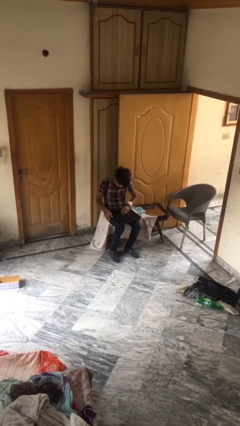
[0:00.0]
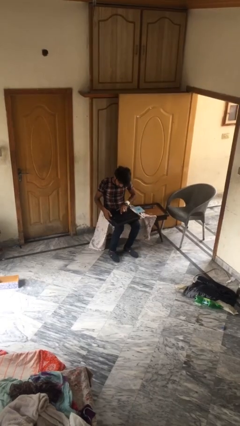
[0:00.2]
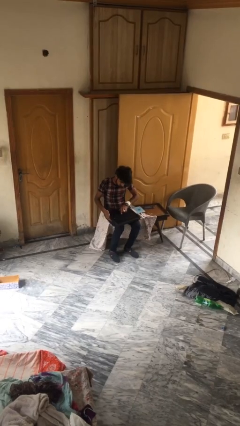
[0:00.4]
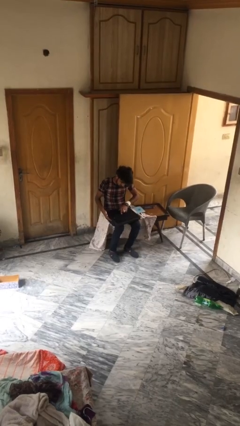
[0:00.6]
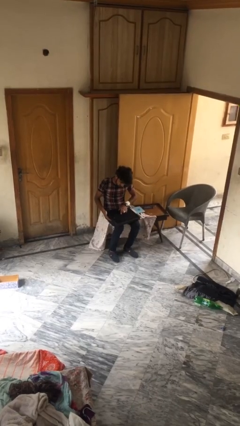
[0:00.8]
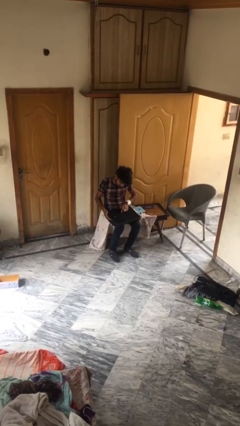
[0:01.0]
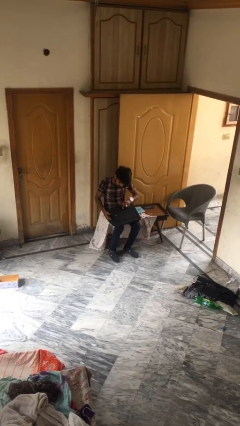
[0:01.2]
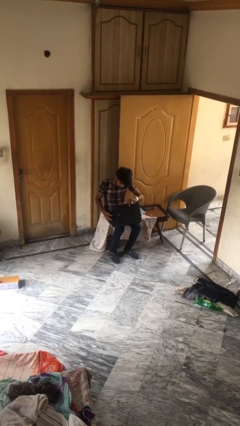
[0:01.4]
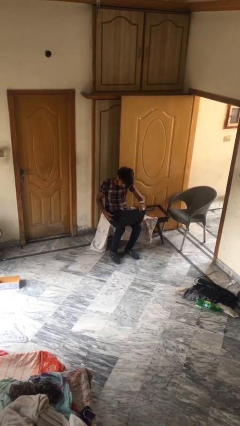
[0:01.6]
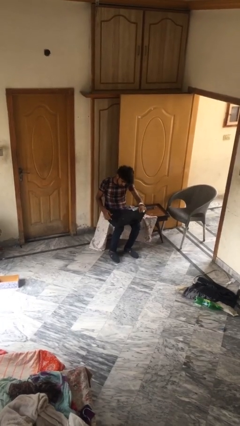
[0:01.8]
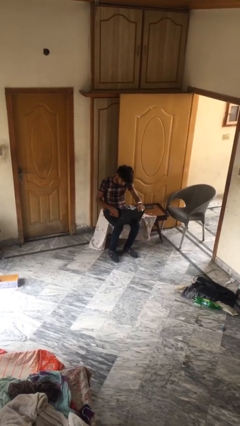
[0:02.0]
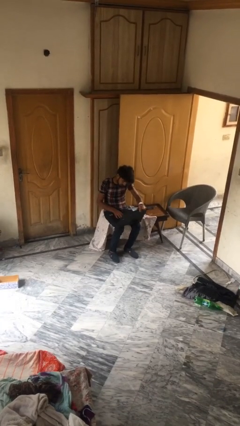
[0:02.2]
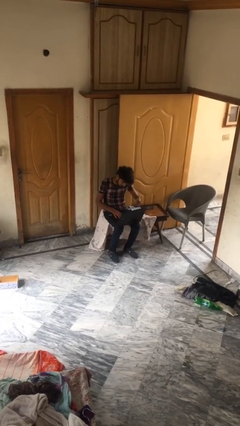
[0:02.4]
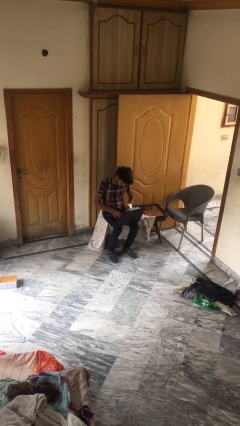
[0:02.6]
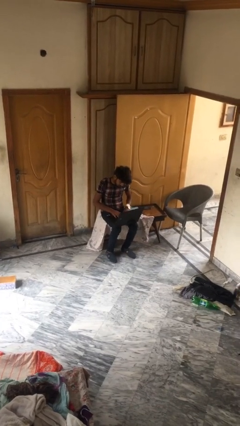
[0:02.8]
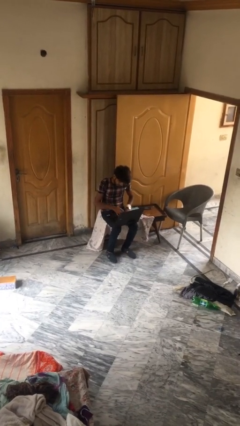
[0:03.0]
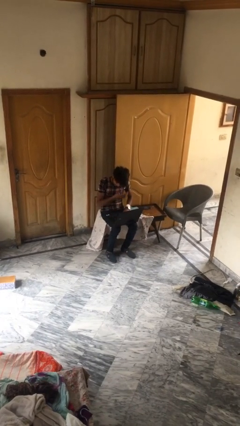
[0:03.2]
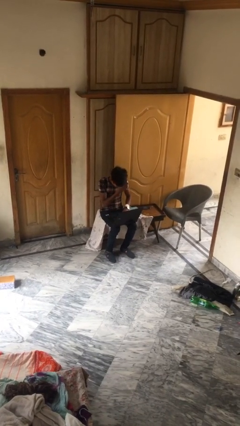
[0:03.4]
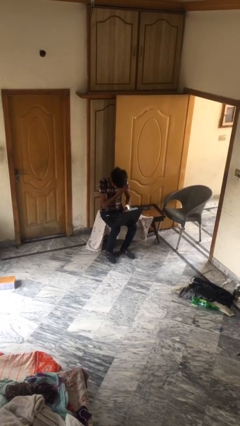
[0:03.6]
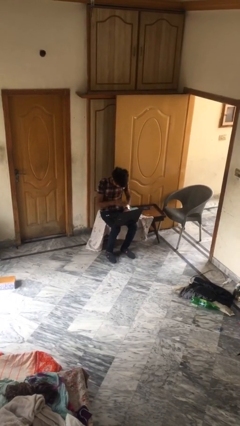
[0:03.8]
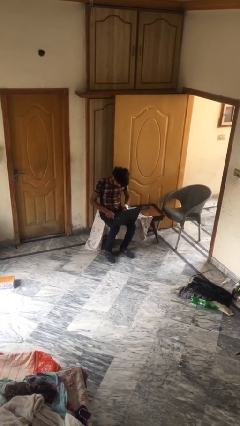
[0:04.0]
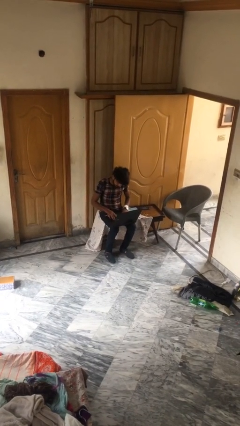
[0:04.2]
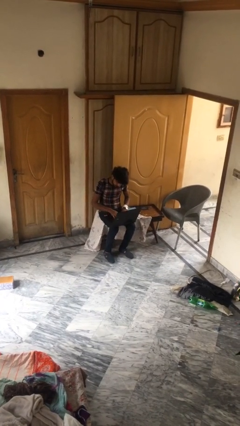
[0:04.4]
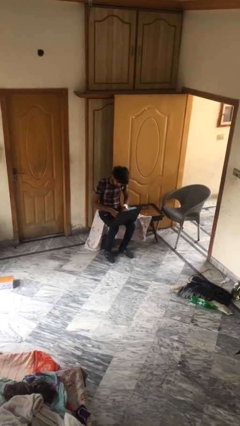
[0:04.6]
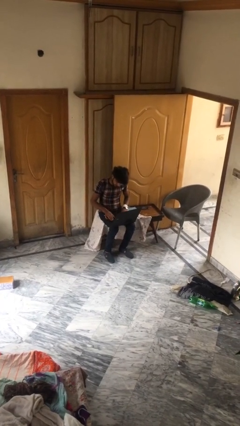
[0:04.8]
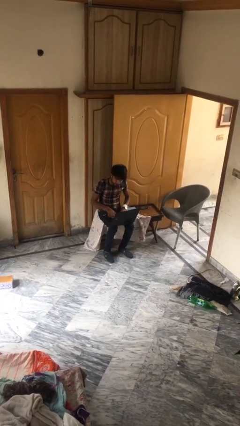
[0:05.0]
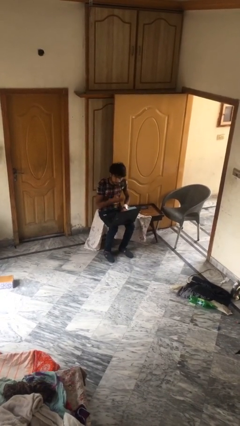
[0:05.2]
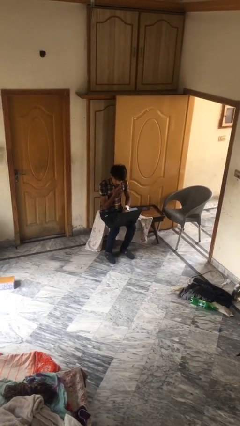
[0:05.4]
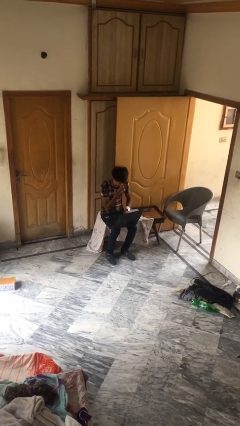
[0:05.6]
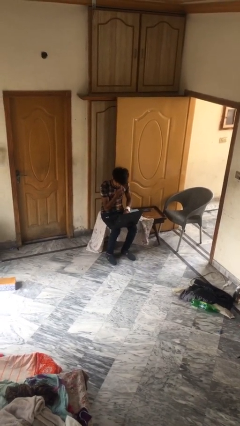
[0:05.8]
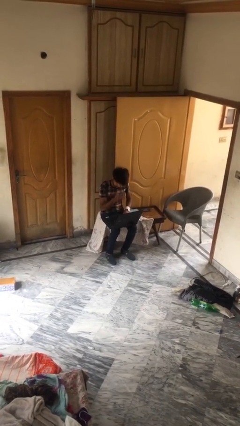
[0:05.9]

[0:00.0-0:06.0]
person interacts with laptop

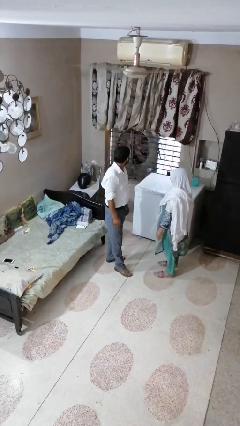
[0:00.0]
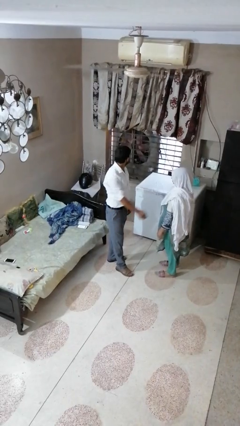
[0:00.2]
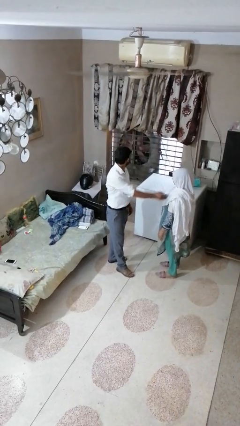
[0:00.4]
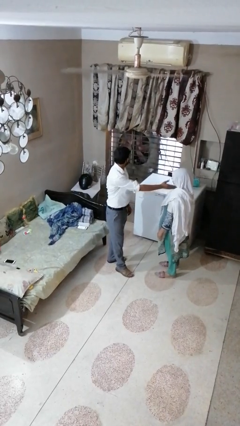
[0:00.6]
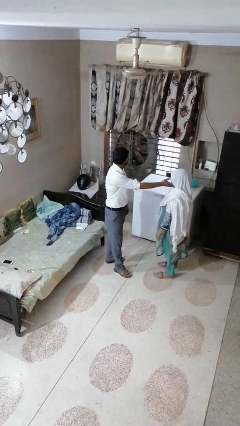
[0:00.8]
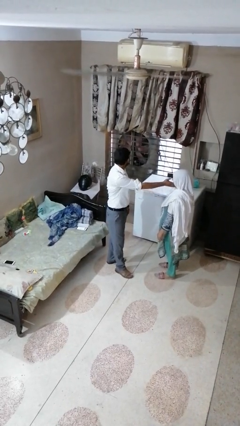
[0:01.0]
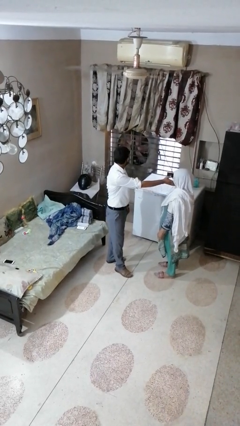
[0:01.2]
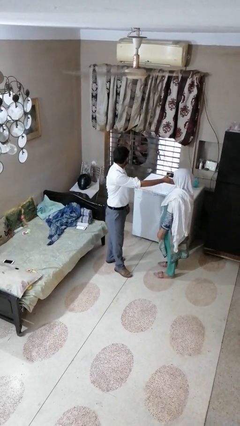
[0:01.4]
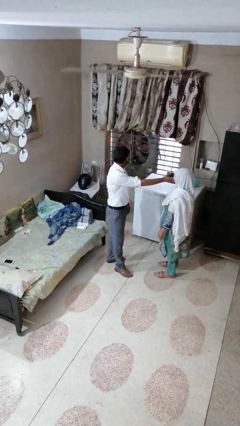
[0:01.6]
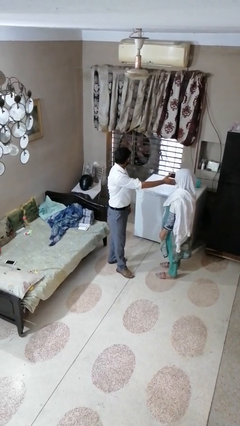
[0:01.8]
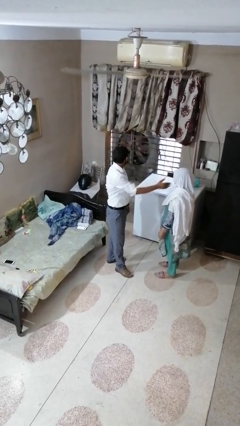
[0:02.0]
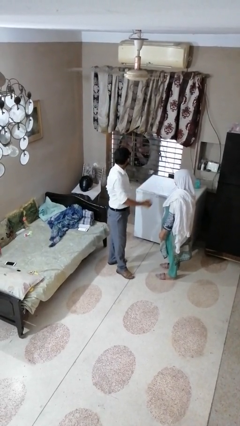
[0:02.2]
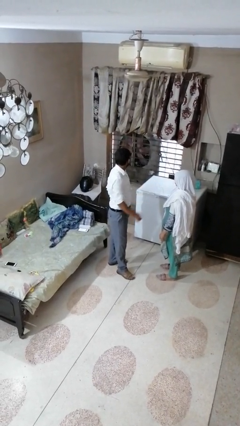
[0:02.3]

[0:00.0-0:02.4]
person touches face of person

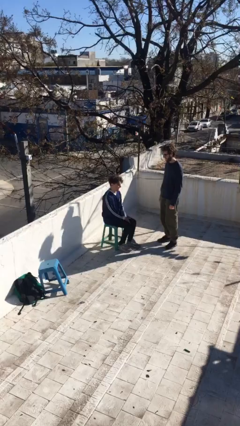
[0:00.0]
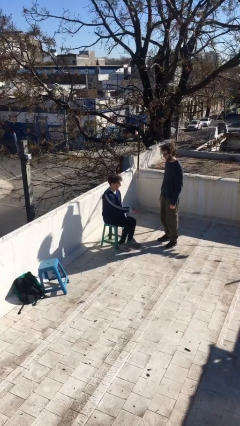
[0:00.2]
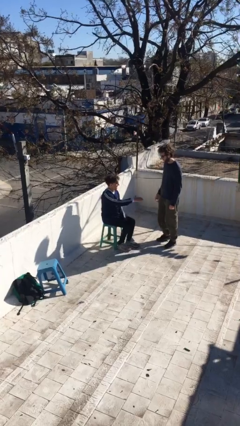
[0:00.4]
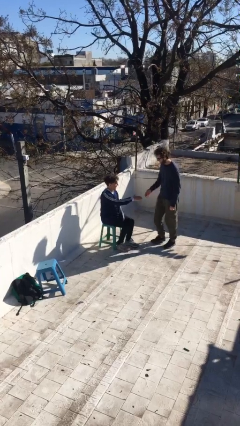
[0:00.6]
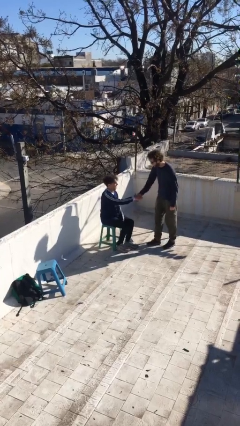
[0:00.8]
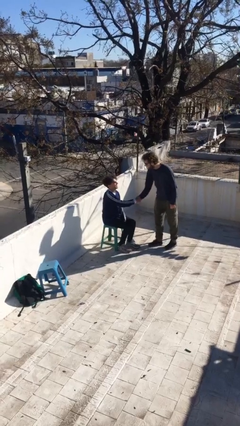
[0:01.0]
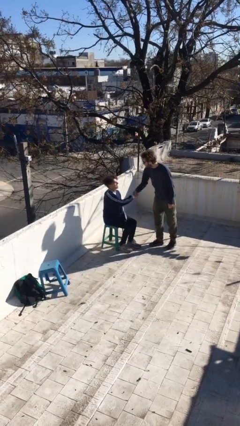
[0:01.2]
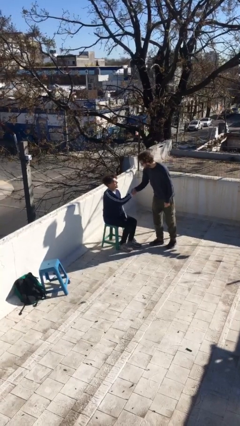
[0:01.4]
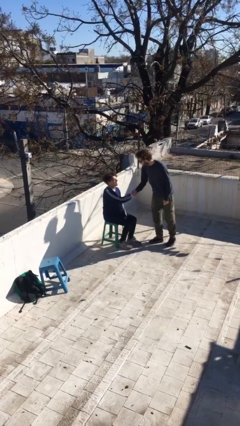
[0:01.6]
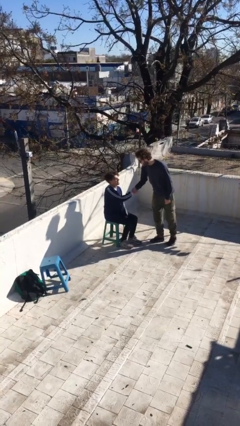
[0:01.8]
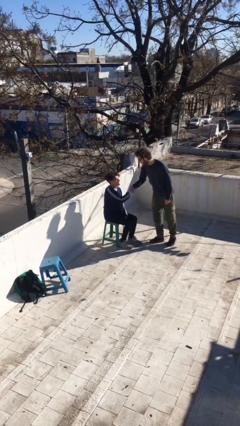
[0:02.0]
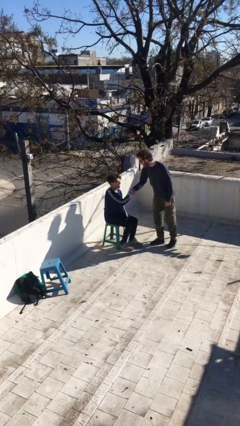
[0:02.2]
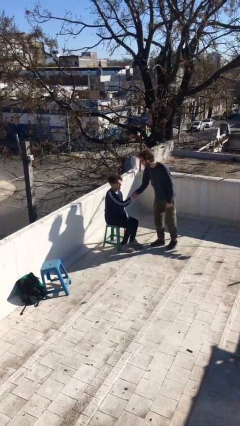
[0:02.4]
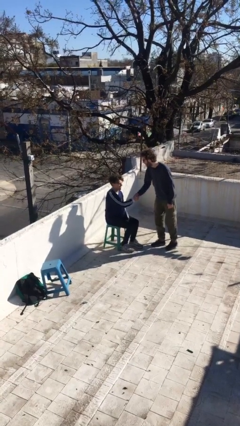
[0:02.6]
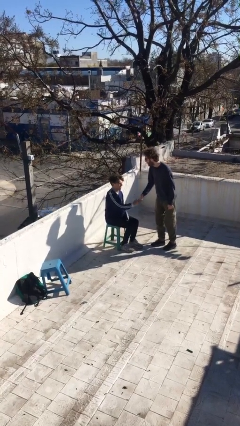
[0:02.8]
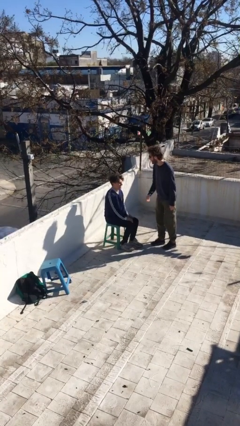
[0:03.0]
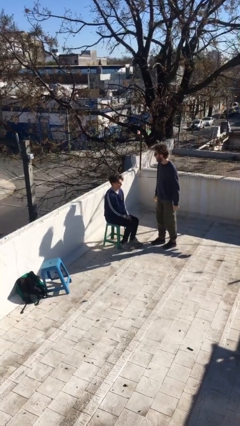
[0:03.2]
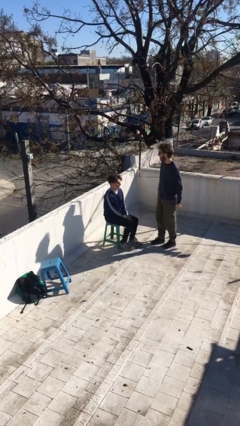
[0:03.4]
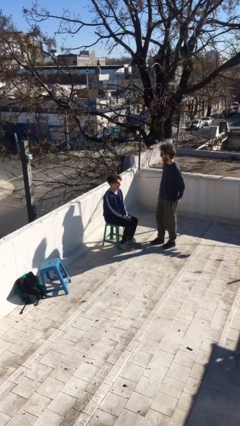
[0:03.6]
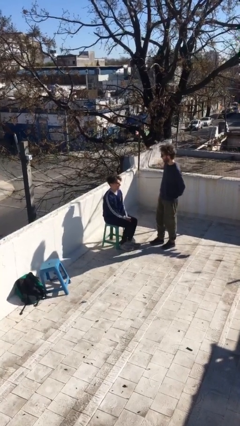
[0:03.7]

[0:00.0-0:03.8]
person shakes hand

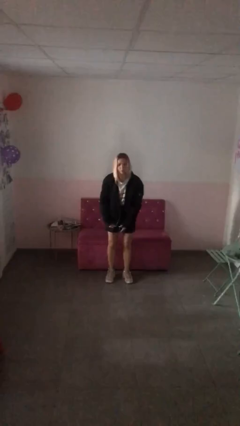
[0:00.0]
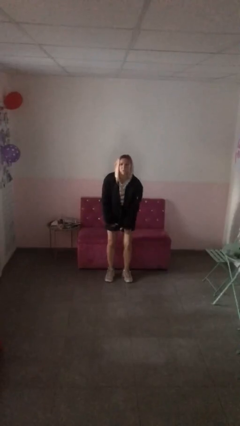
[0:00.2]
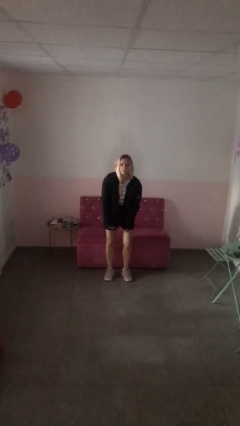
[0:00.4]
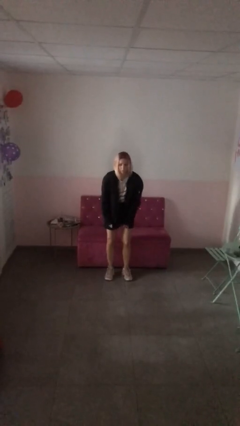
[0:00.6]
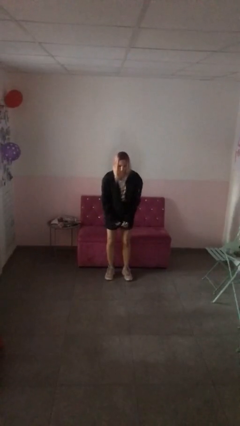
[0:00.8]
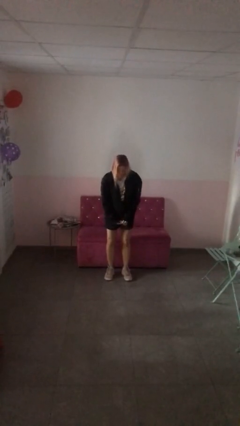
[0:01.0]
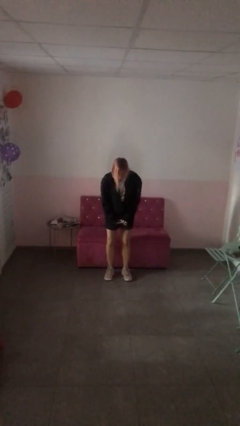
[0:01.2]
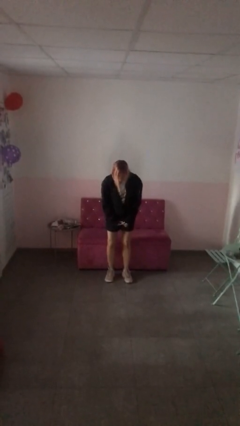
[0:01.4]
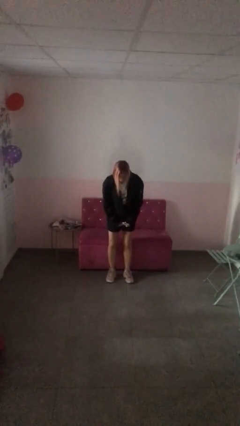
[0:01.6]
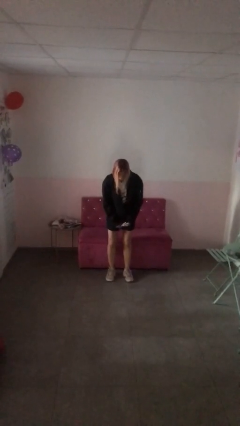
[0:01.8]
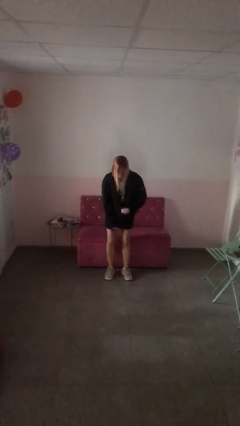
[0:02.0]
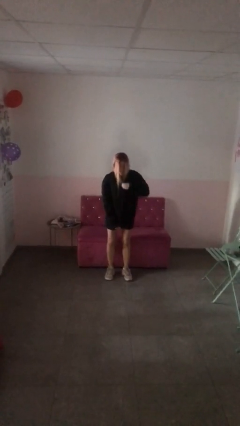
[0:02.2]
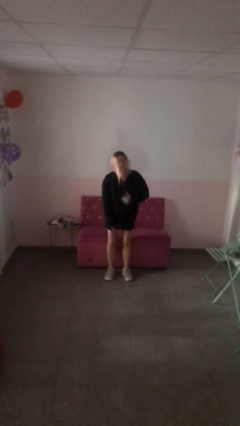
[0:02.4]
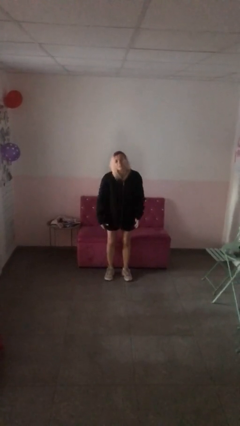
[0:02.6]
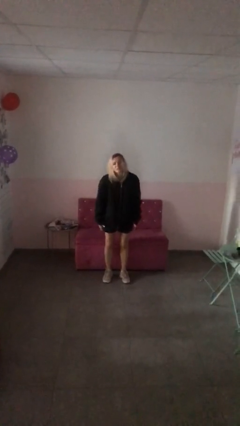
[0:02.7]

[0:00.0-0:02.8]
person zips up jacket

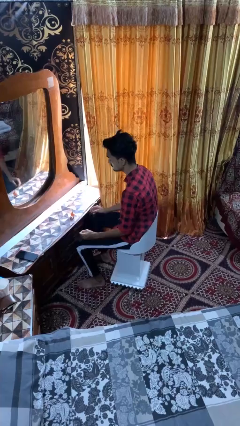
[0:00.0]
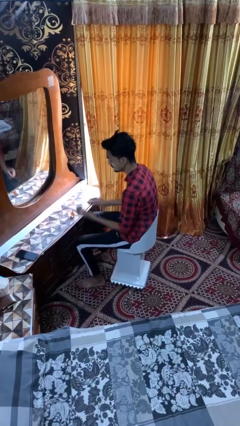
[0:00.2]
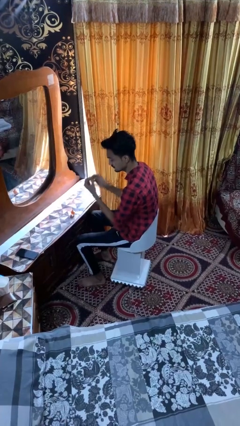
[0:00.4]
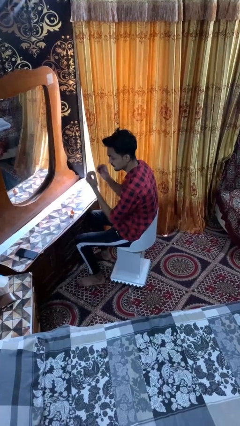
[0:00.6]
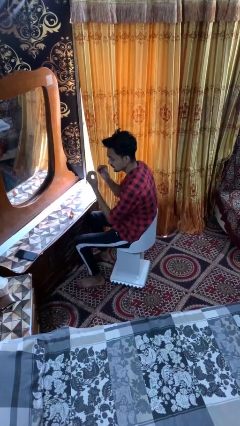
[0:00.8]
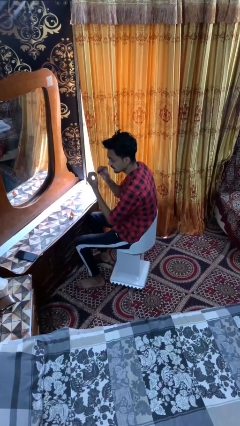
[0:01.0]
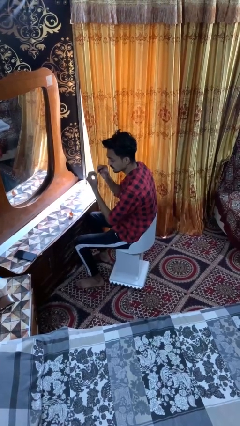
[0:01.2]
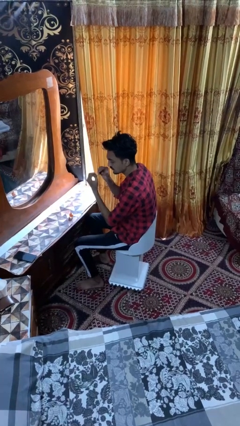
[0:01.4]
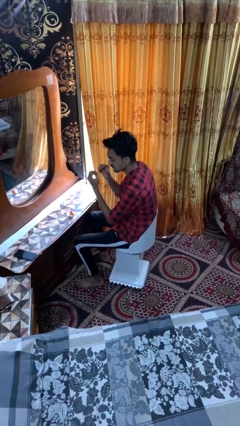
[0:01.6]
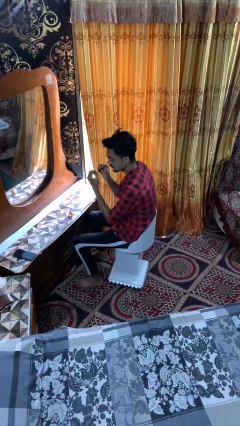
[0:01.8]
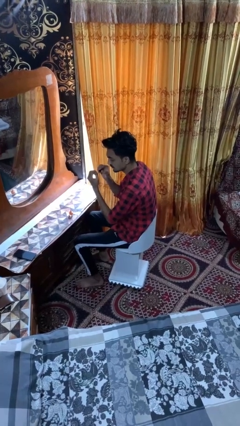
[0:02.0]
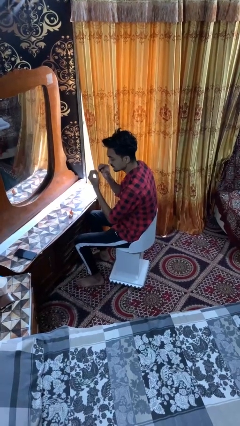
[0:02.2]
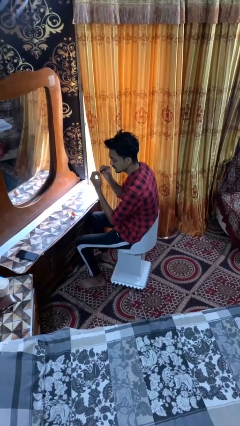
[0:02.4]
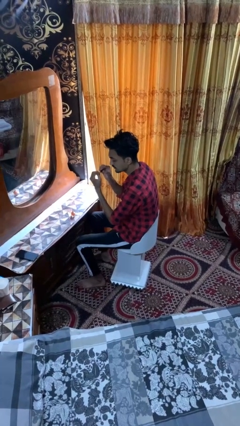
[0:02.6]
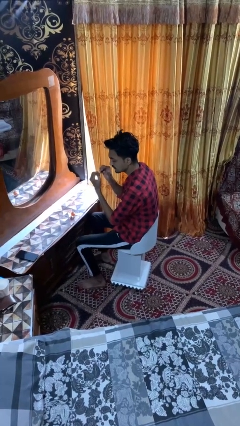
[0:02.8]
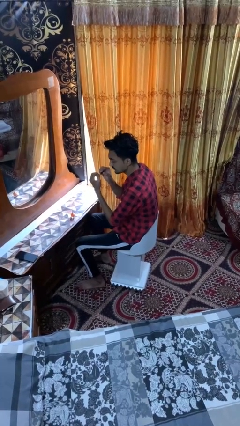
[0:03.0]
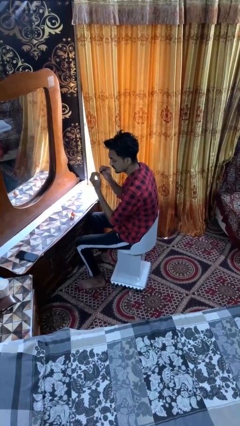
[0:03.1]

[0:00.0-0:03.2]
person paints fingernails
